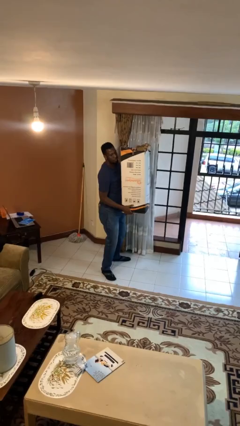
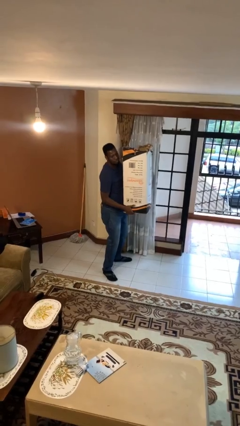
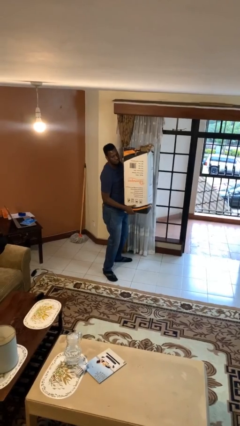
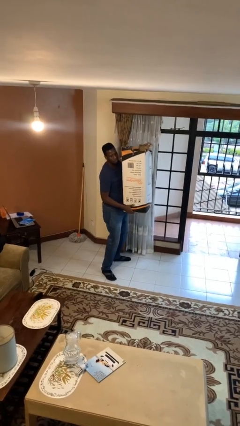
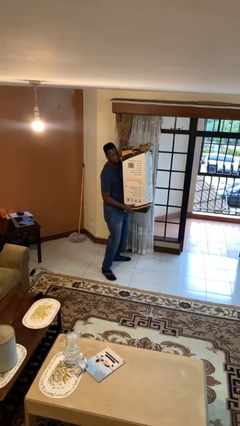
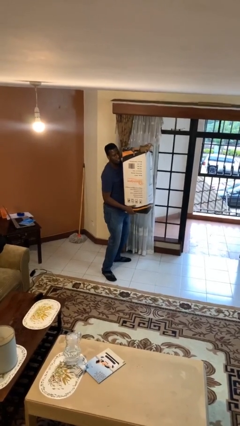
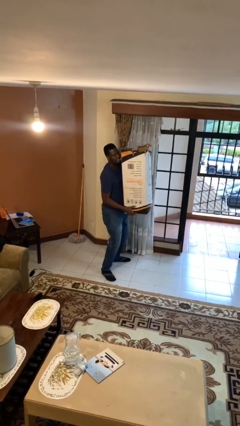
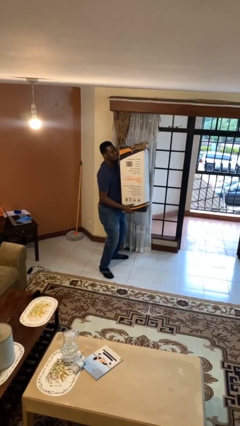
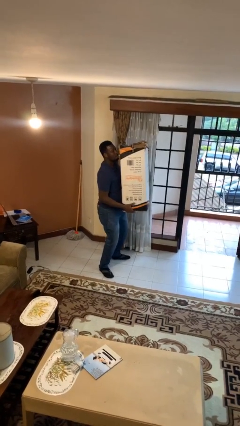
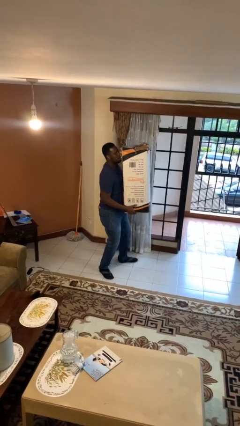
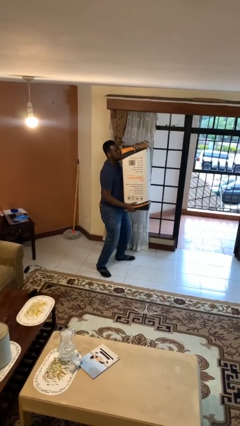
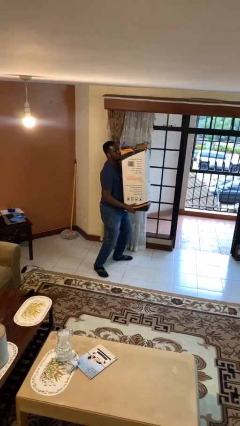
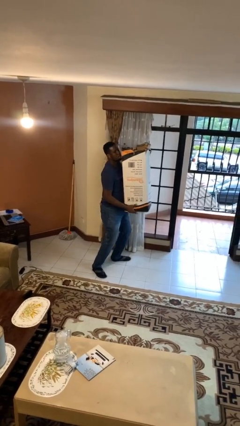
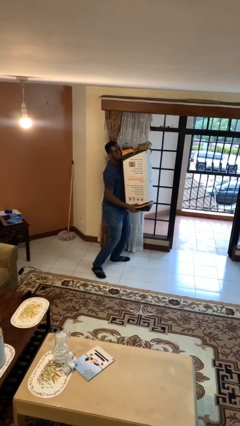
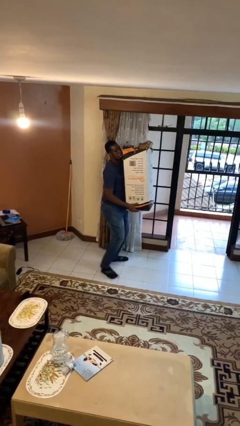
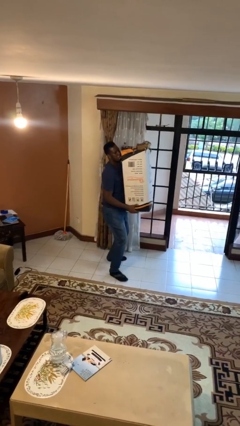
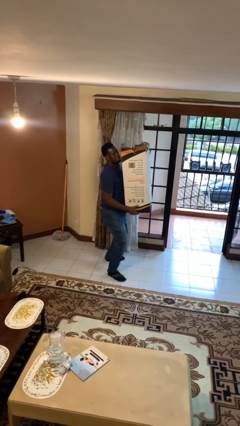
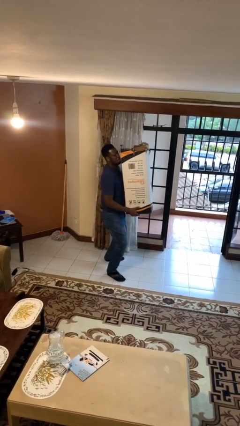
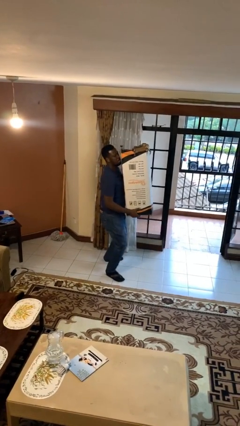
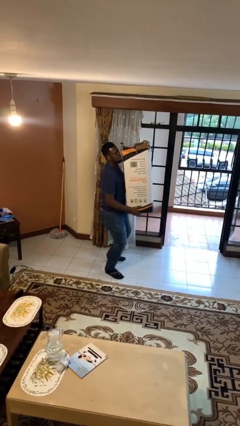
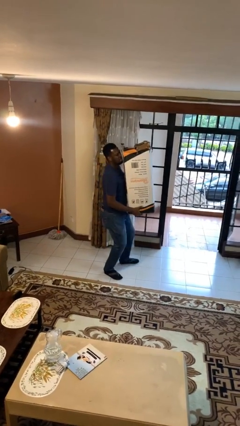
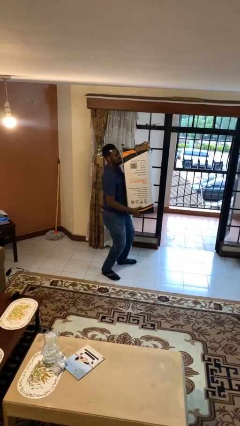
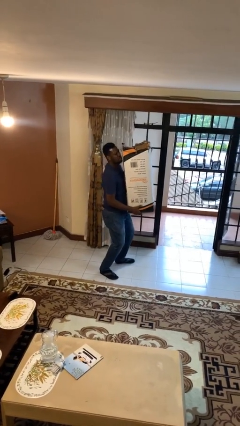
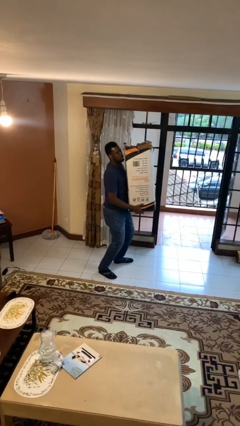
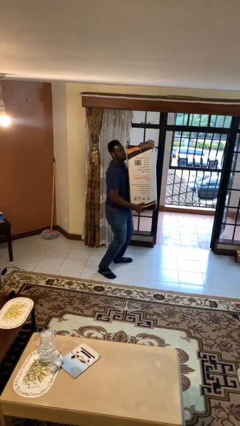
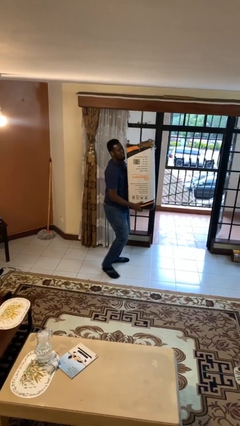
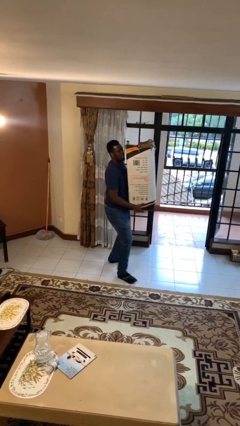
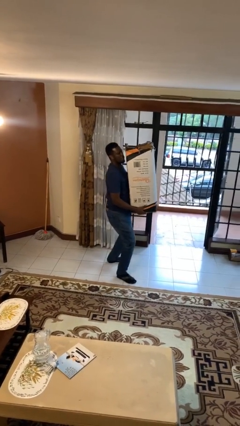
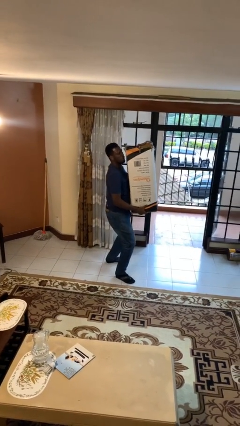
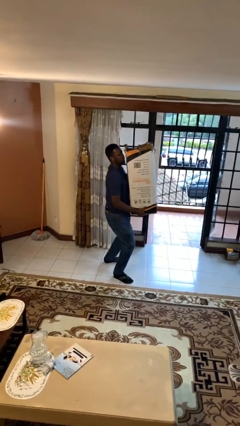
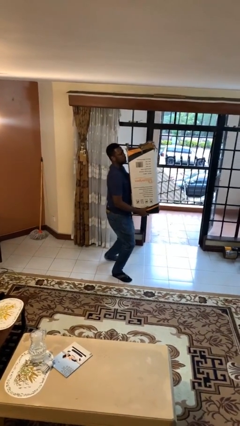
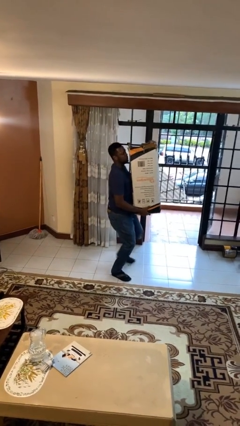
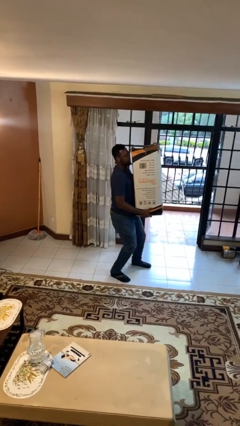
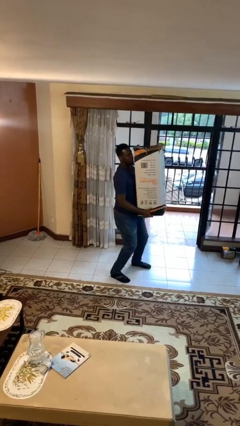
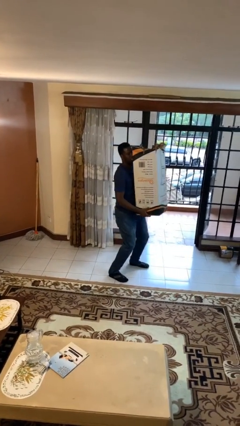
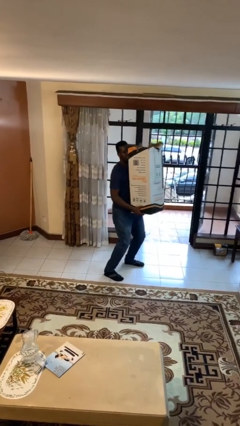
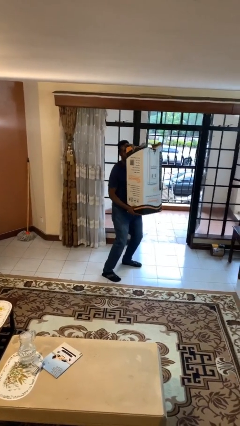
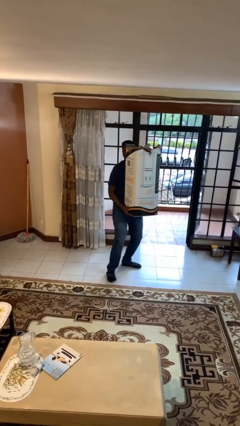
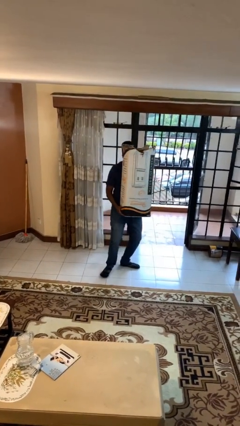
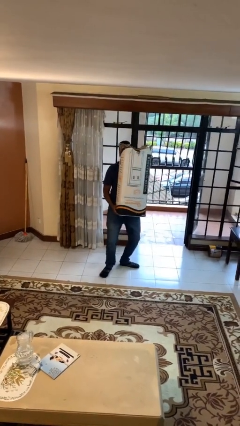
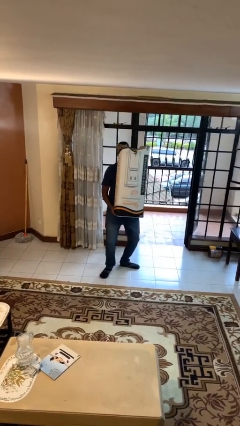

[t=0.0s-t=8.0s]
person carries heavy object

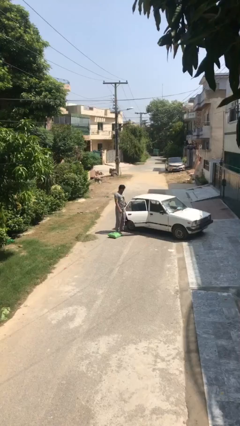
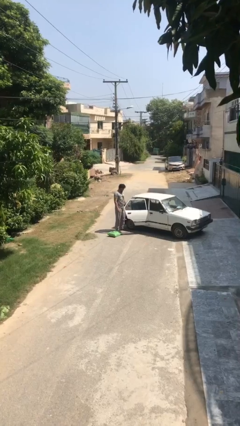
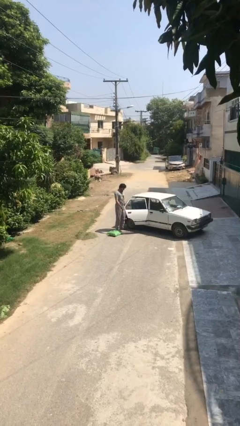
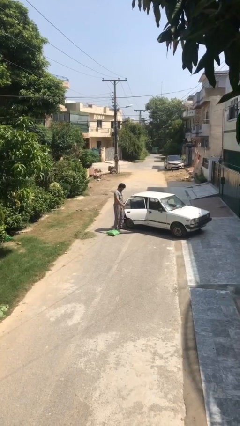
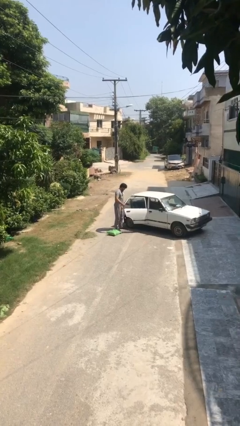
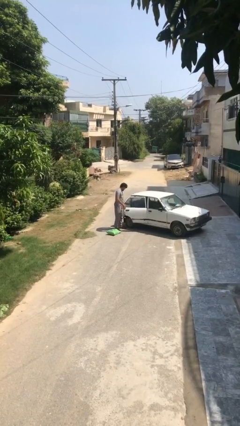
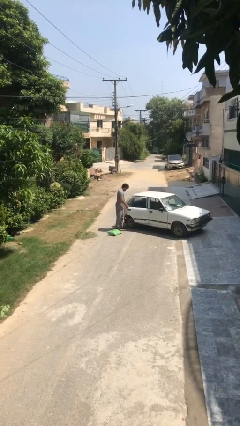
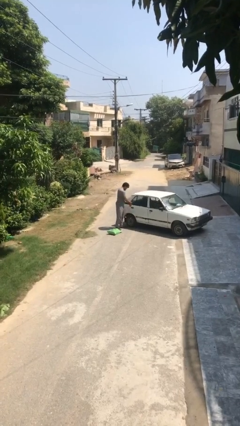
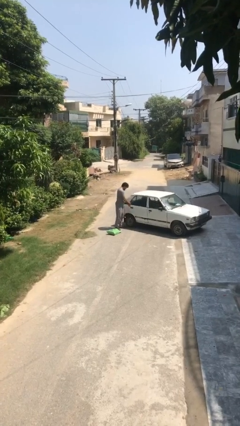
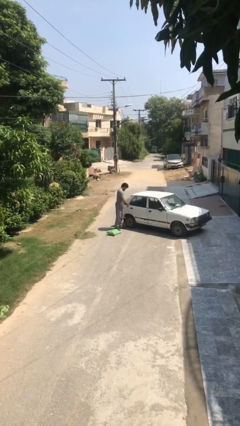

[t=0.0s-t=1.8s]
person closes car door

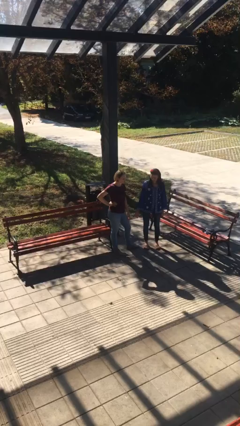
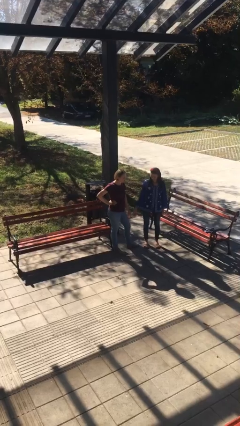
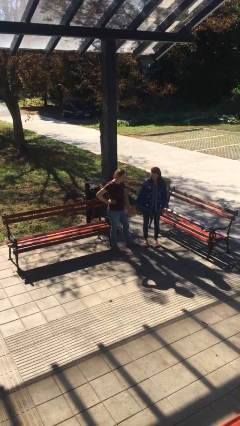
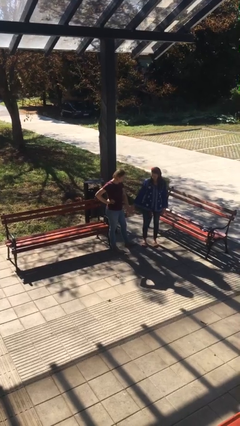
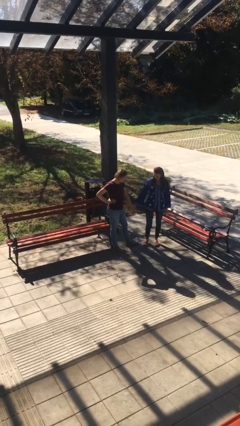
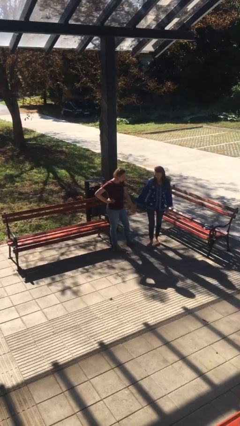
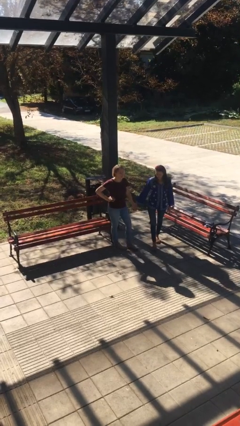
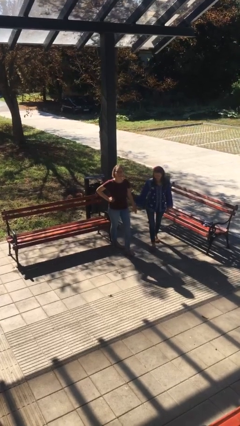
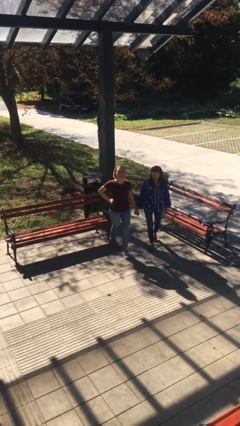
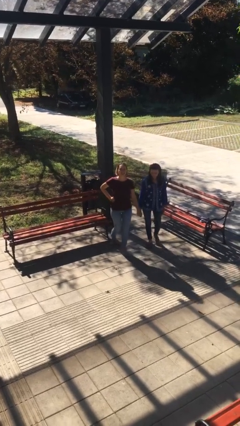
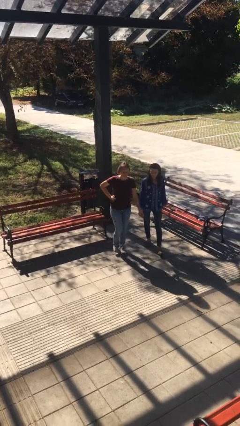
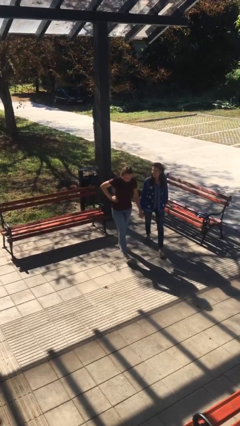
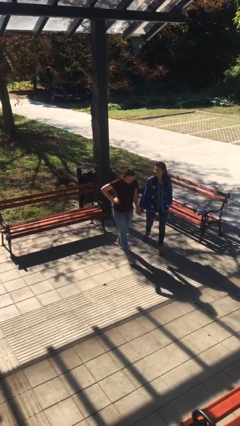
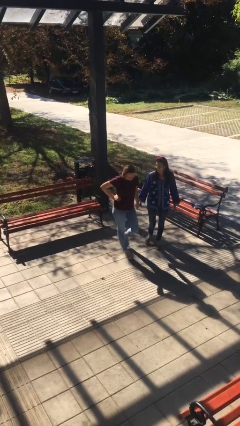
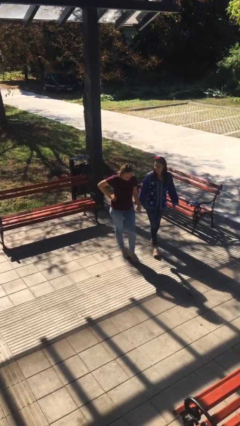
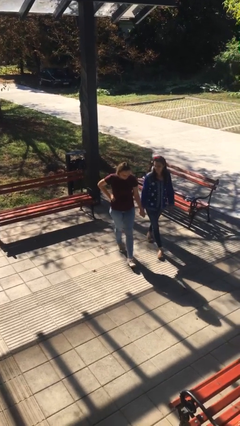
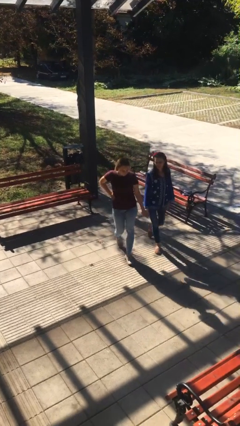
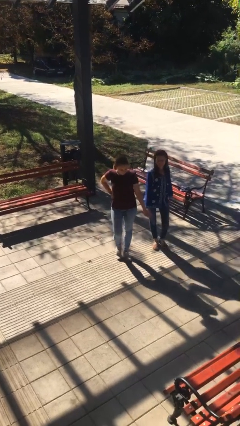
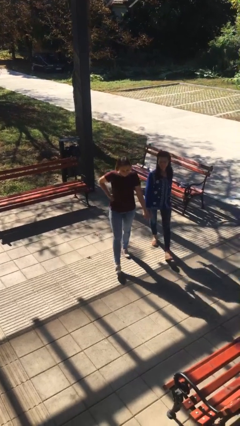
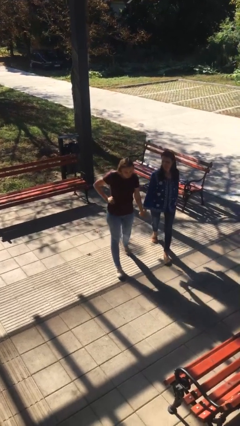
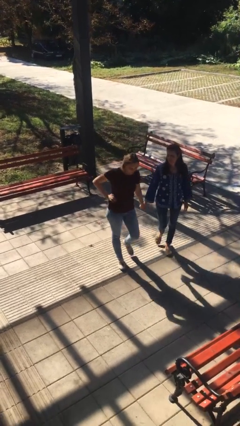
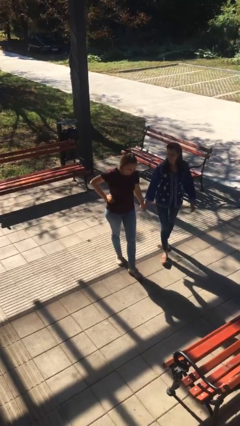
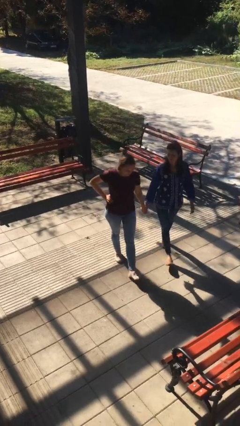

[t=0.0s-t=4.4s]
person holds hand

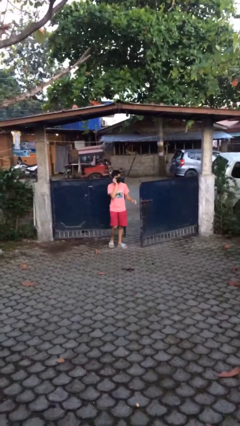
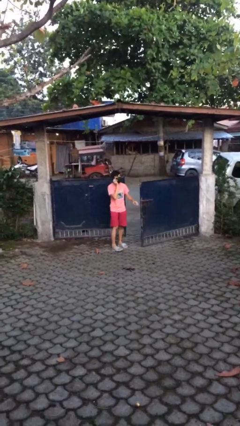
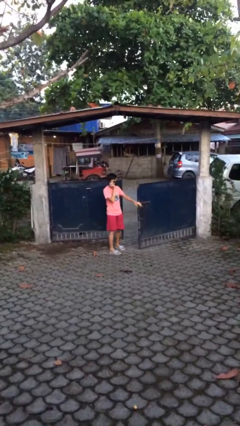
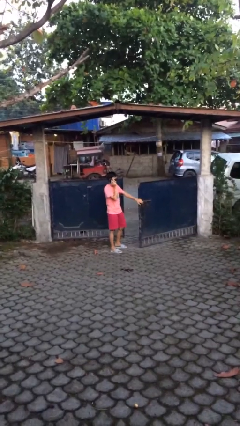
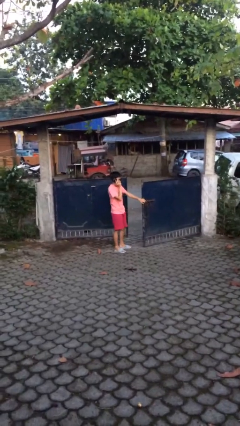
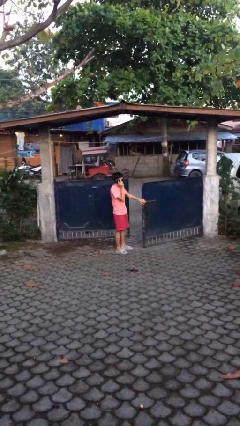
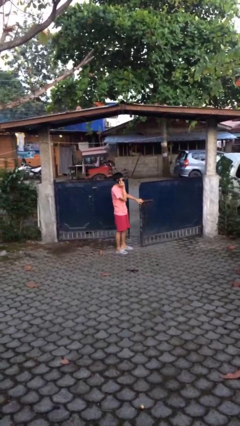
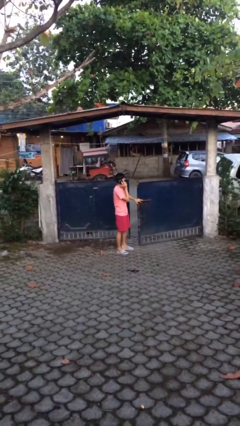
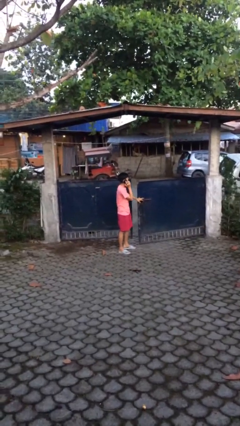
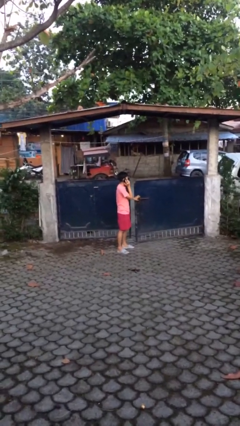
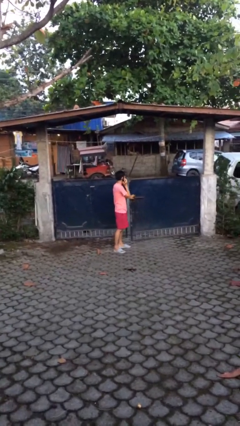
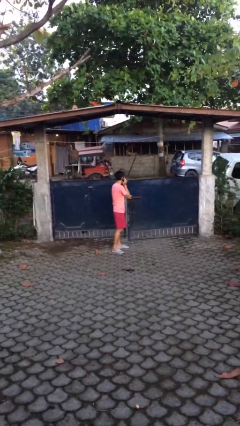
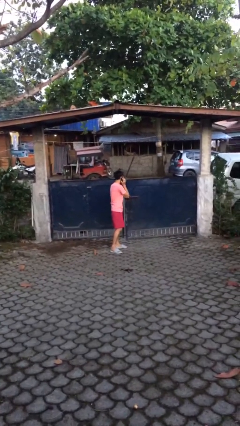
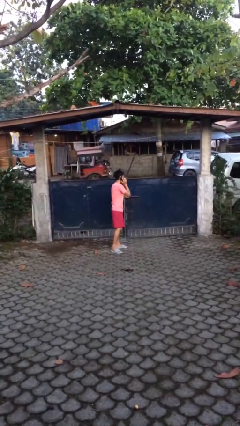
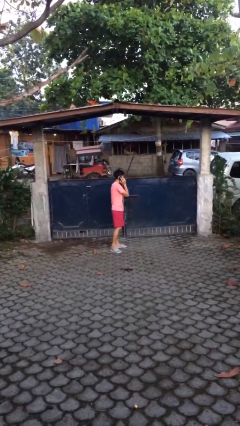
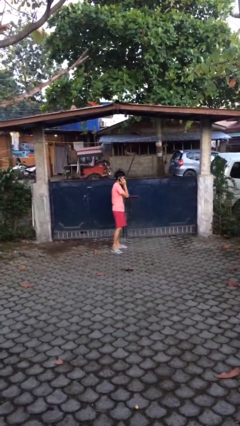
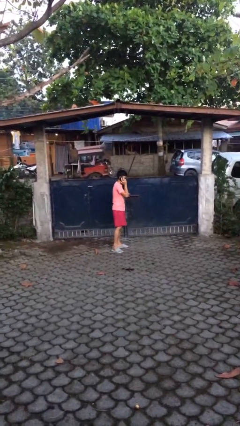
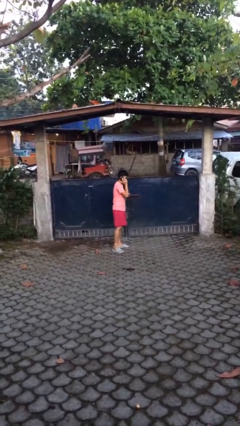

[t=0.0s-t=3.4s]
person closes facility door

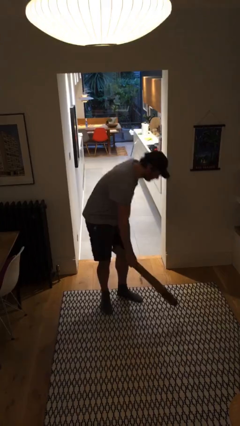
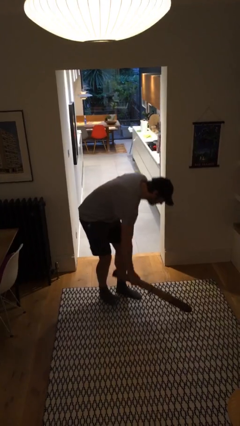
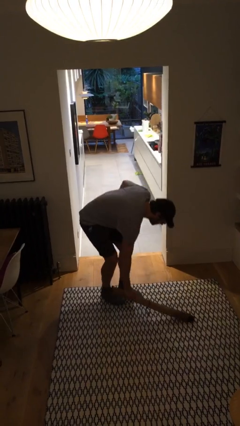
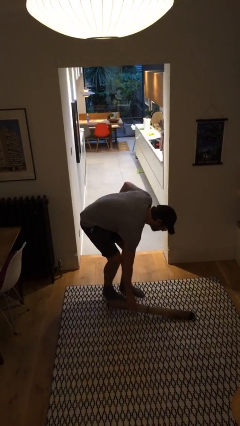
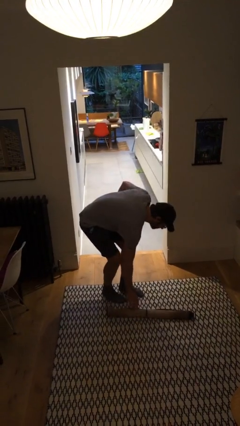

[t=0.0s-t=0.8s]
person puts down object on floor
